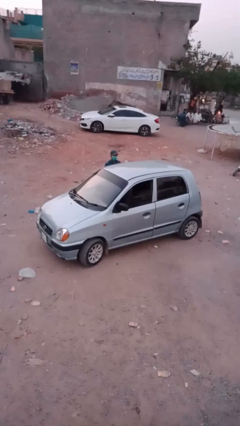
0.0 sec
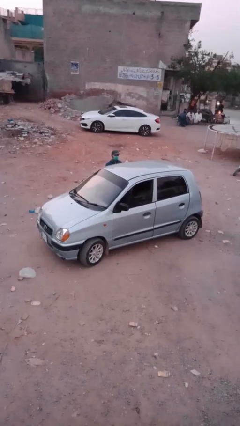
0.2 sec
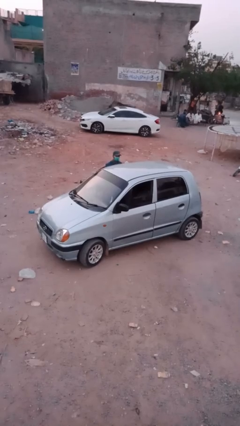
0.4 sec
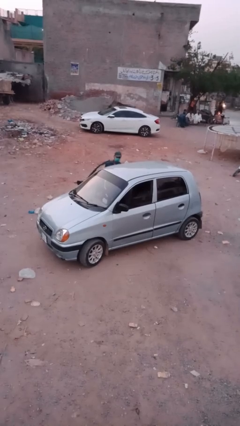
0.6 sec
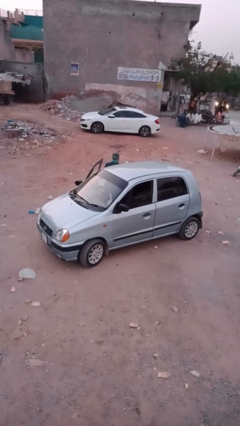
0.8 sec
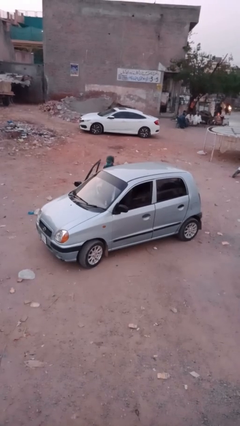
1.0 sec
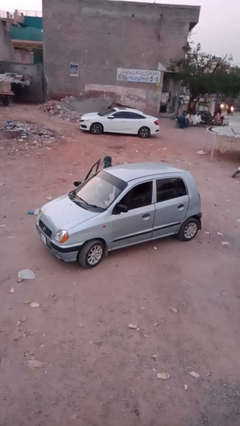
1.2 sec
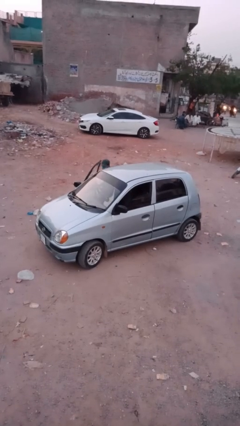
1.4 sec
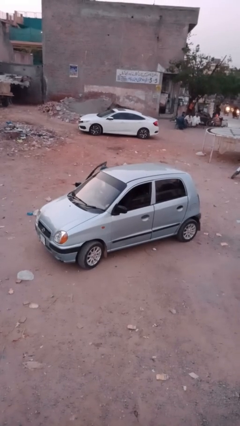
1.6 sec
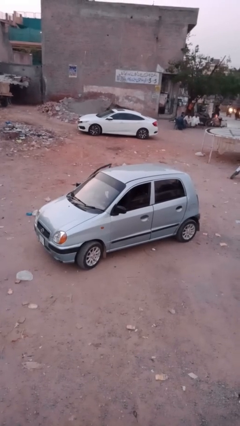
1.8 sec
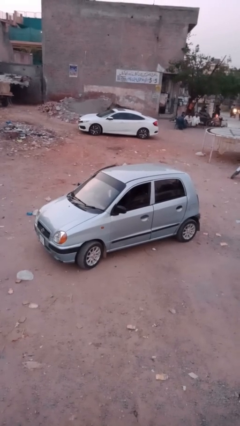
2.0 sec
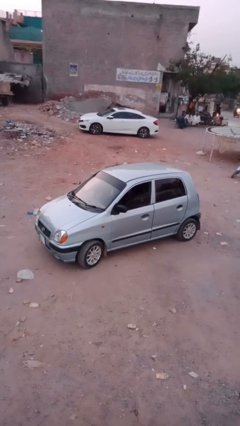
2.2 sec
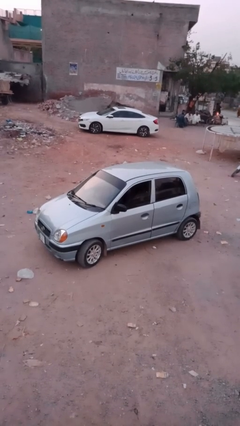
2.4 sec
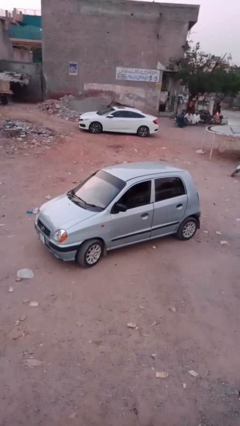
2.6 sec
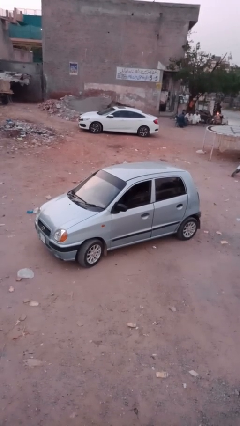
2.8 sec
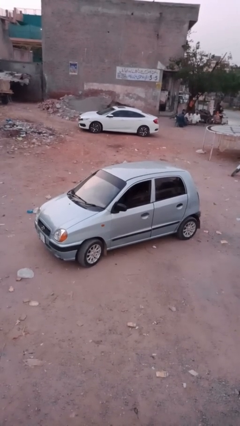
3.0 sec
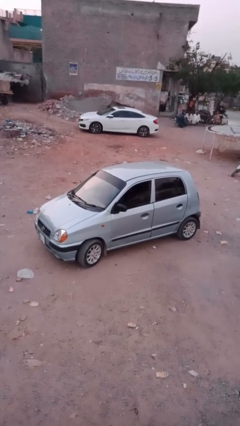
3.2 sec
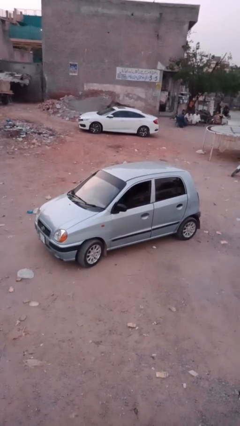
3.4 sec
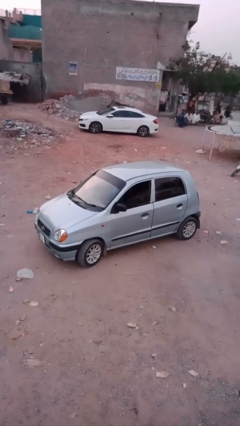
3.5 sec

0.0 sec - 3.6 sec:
car picks up person

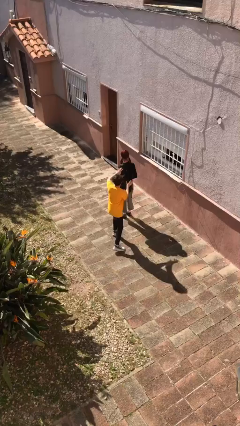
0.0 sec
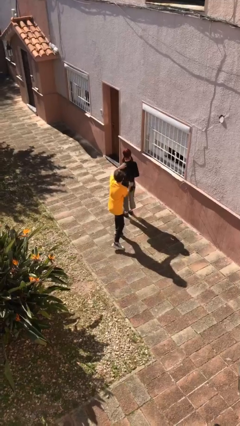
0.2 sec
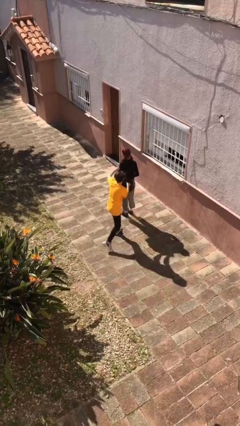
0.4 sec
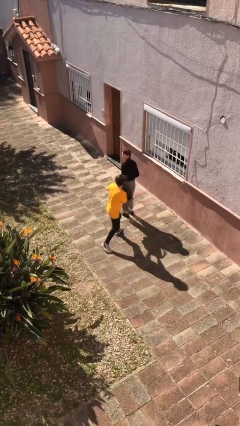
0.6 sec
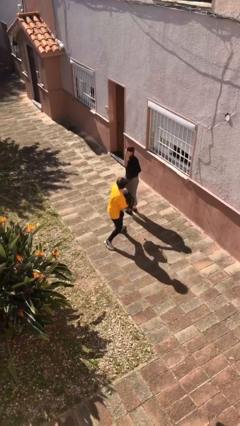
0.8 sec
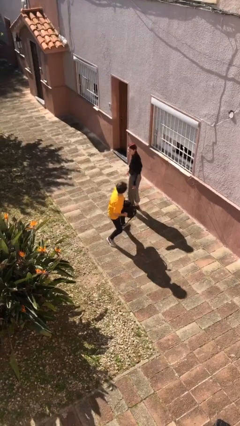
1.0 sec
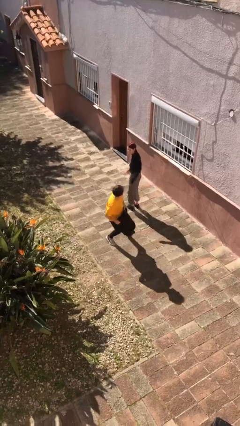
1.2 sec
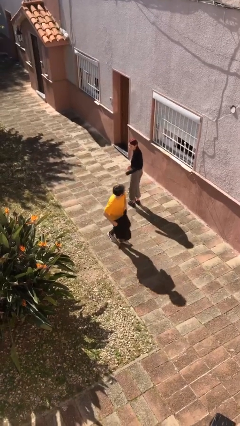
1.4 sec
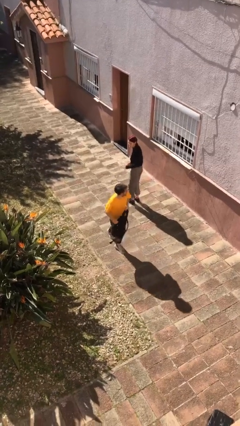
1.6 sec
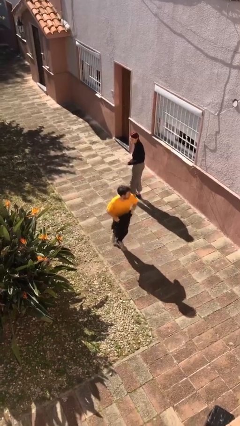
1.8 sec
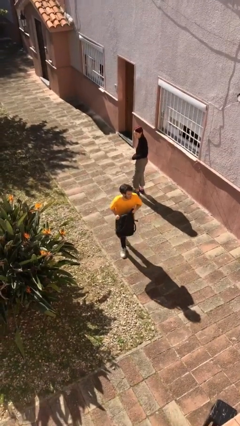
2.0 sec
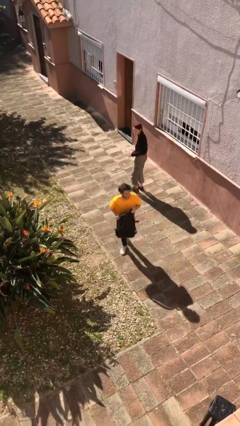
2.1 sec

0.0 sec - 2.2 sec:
person steals object from person

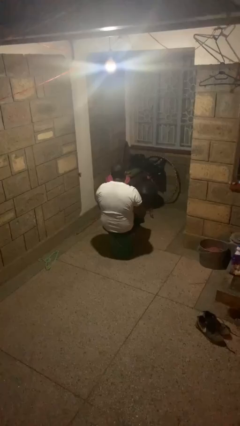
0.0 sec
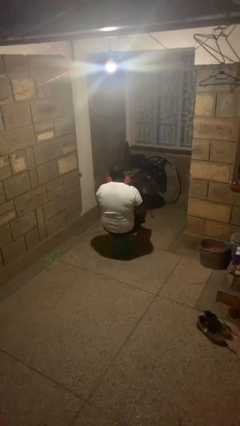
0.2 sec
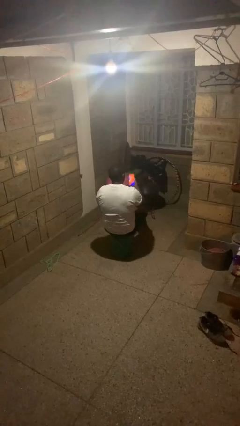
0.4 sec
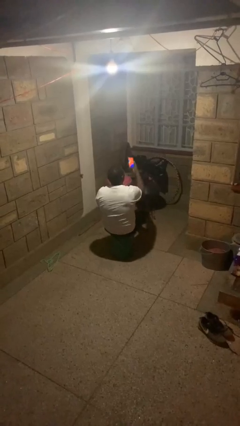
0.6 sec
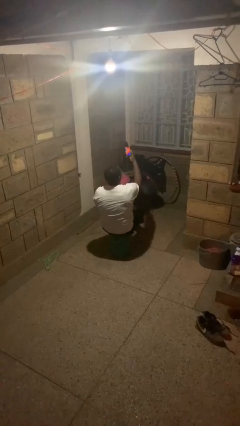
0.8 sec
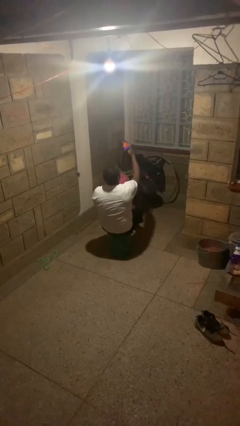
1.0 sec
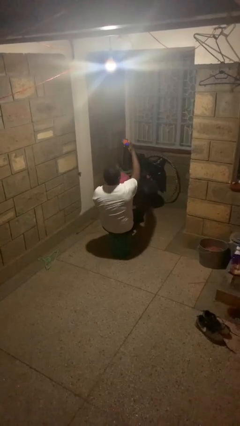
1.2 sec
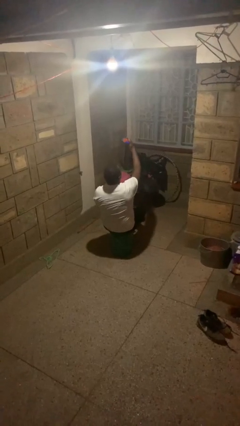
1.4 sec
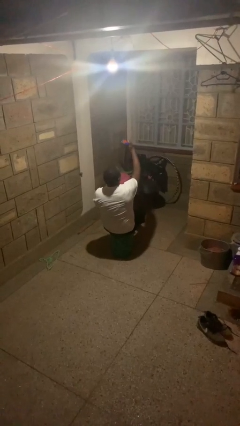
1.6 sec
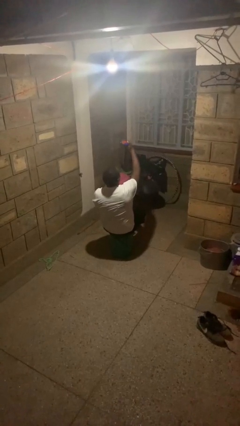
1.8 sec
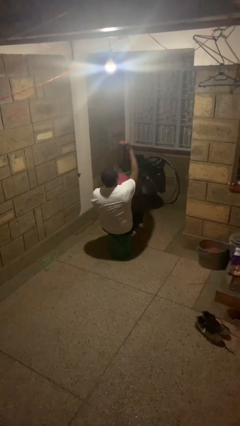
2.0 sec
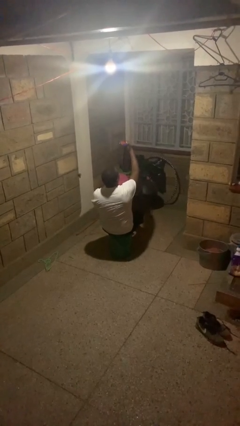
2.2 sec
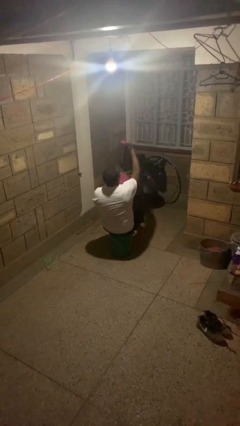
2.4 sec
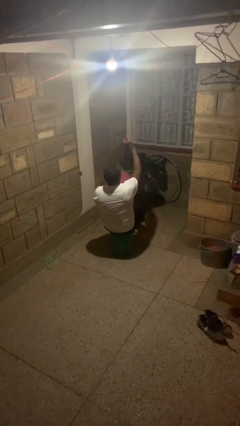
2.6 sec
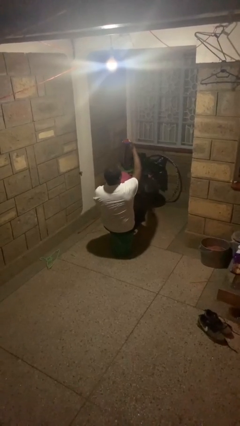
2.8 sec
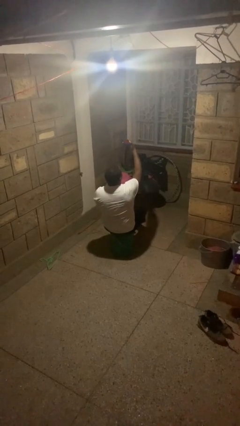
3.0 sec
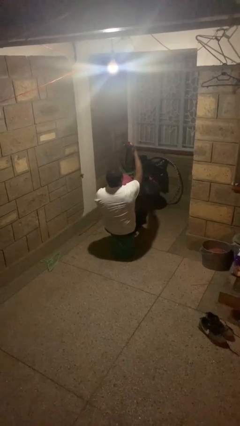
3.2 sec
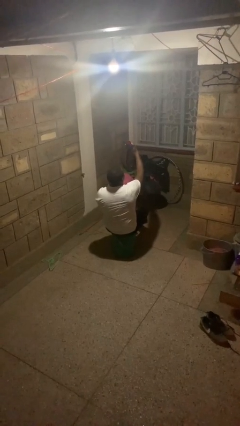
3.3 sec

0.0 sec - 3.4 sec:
person takes selfie

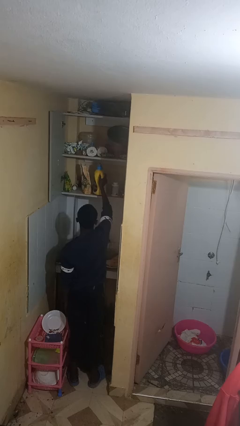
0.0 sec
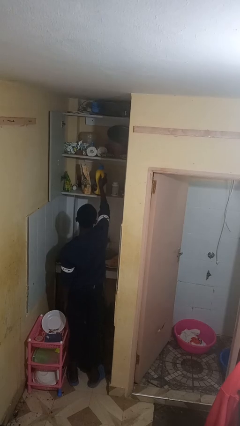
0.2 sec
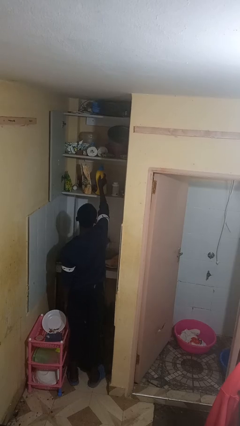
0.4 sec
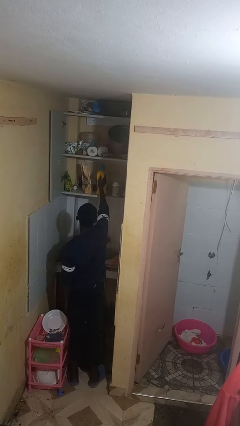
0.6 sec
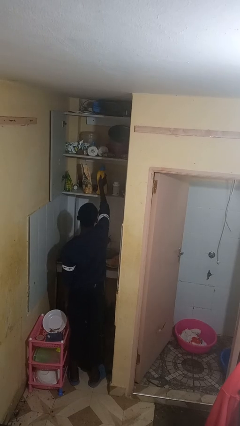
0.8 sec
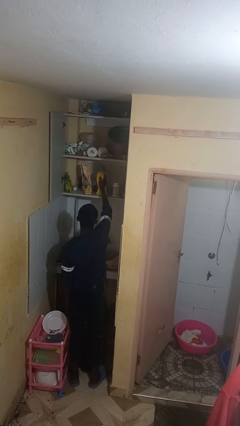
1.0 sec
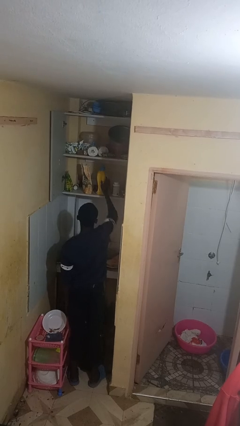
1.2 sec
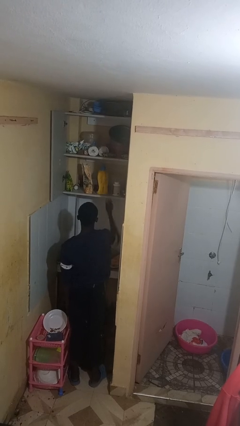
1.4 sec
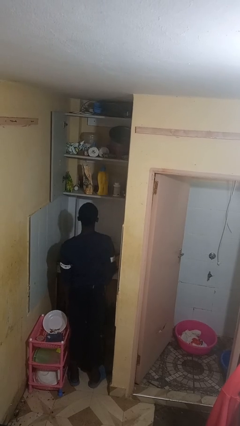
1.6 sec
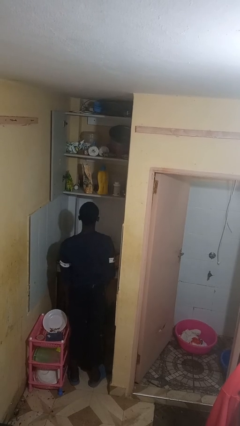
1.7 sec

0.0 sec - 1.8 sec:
person puts object in cabinet

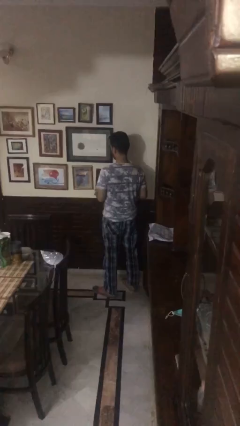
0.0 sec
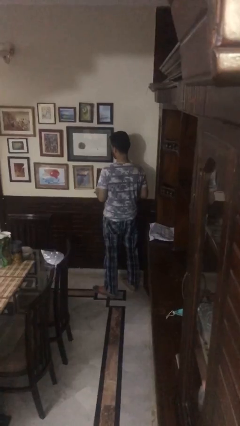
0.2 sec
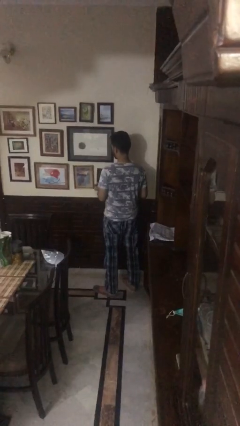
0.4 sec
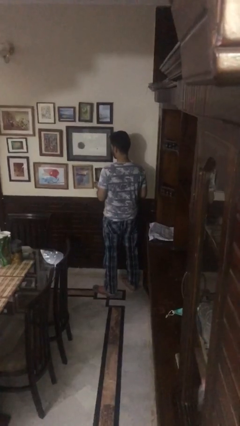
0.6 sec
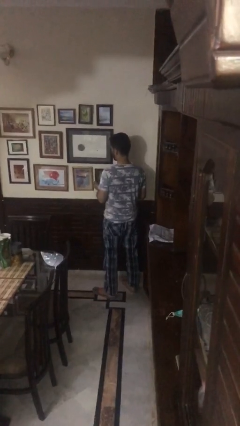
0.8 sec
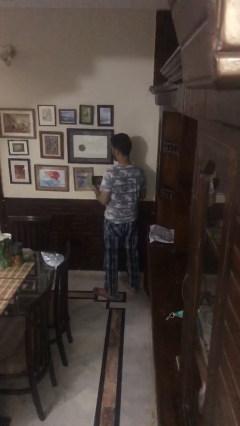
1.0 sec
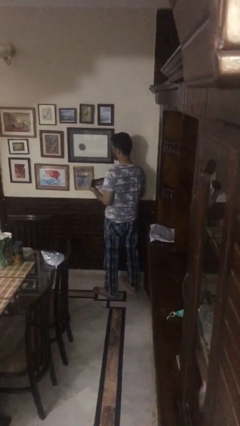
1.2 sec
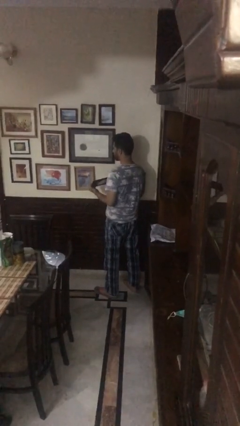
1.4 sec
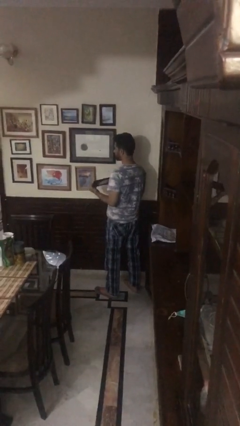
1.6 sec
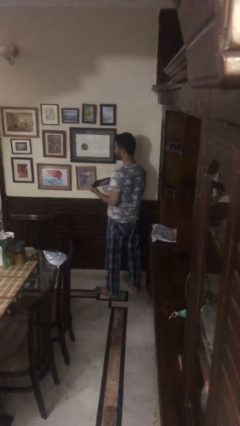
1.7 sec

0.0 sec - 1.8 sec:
person takes down picture frame

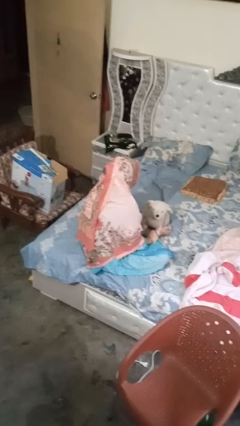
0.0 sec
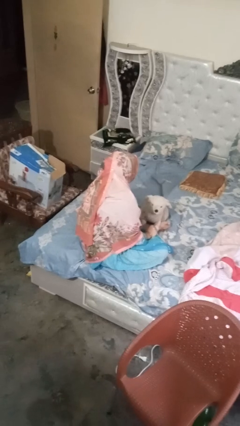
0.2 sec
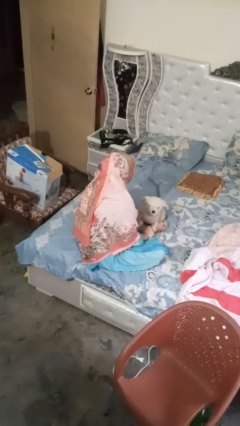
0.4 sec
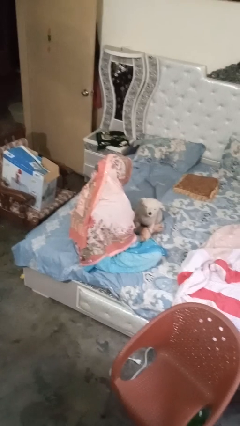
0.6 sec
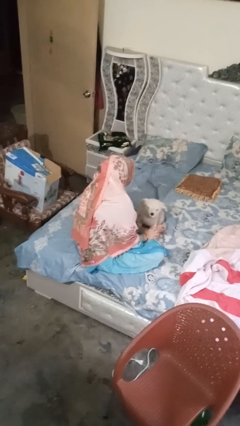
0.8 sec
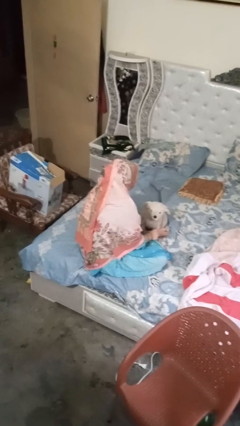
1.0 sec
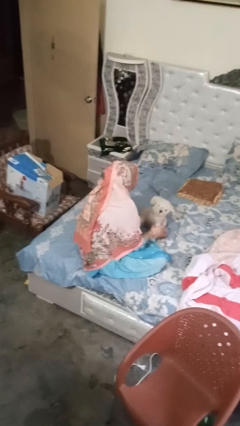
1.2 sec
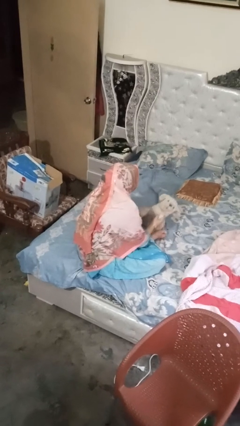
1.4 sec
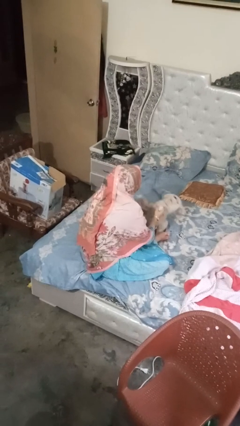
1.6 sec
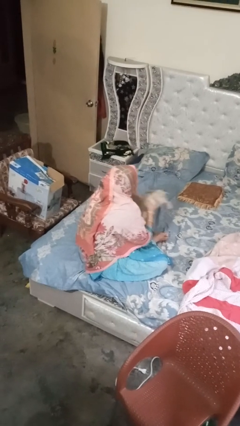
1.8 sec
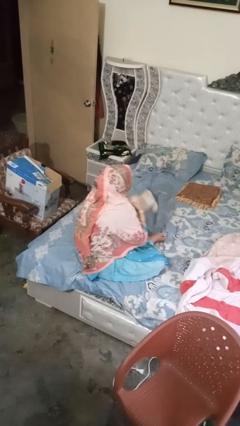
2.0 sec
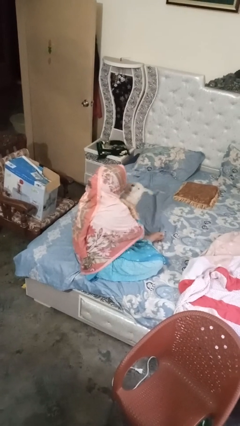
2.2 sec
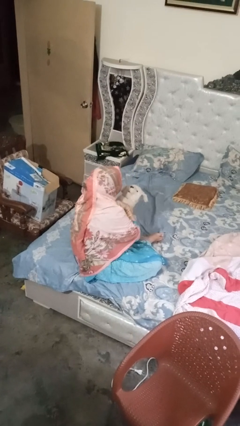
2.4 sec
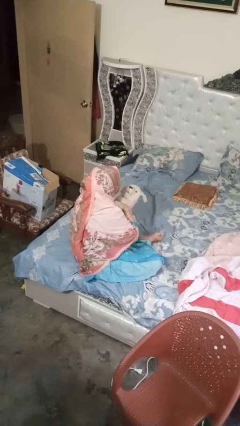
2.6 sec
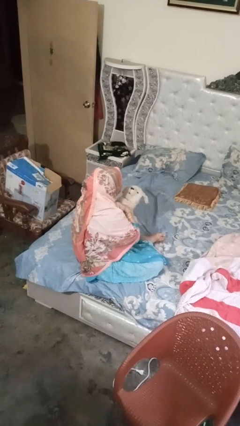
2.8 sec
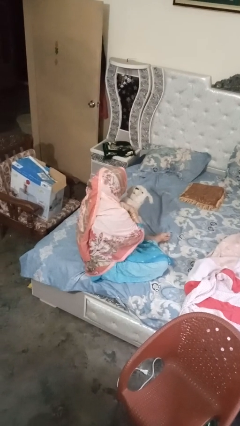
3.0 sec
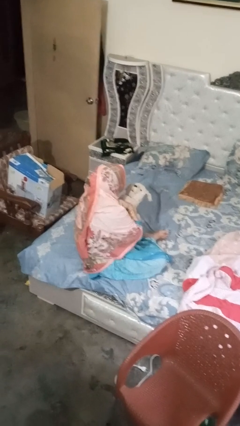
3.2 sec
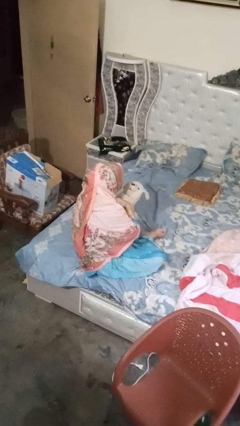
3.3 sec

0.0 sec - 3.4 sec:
person hugs stuffed animal

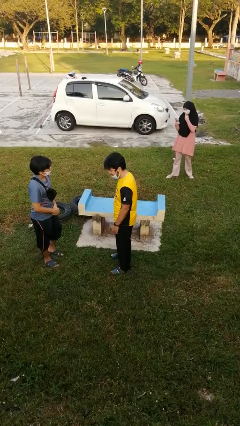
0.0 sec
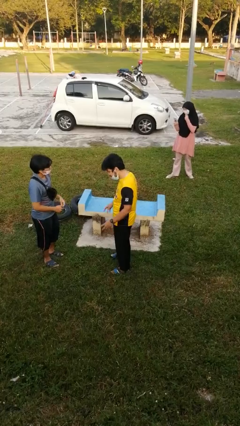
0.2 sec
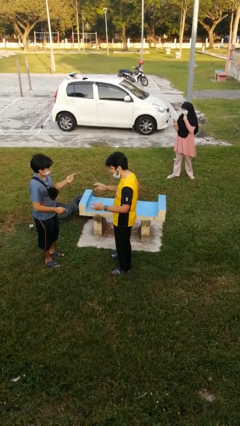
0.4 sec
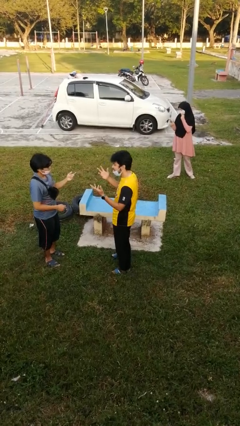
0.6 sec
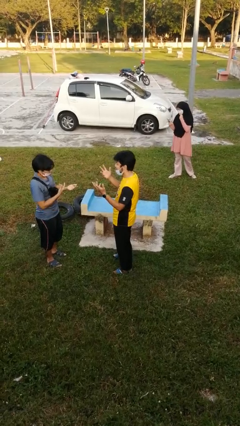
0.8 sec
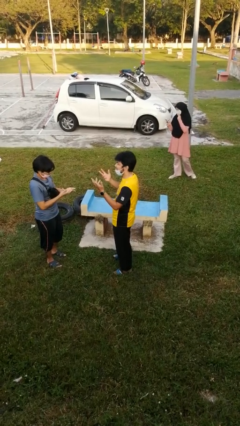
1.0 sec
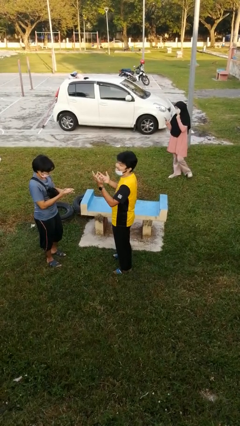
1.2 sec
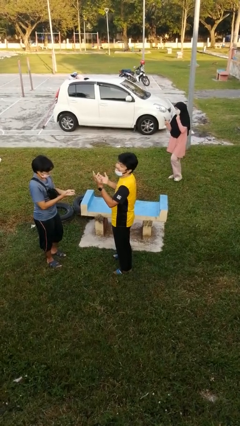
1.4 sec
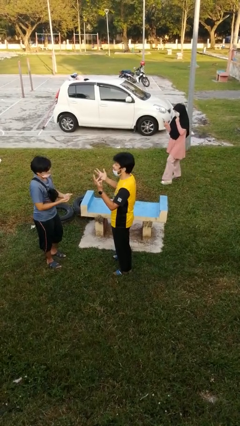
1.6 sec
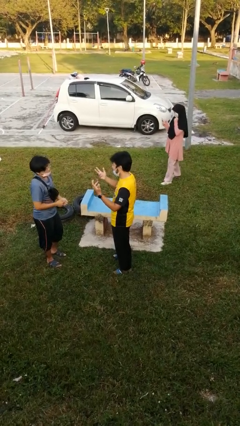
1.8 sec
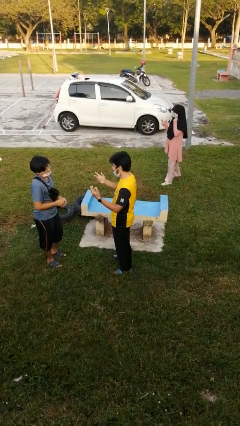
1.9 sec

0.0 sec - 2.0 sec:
person talks to person
